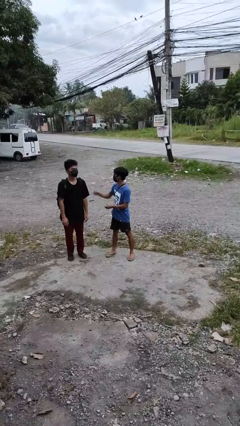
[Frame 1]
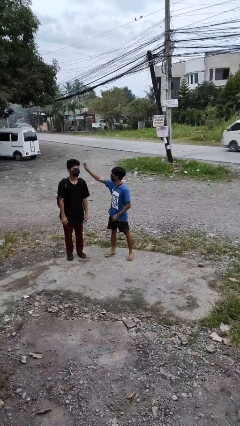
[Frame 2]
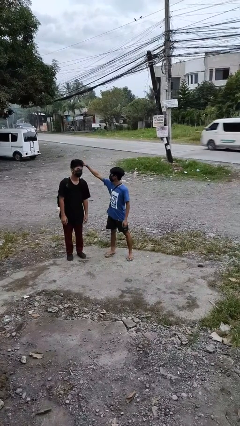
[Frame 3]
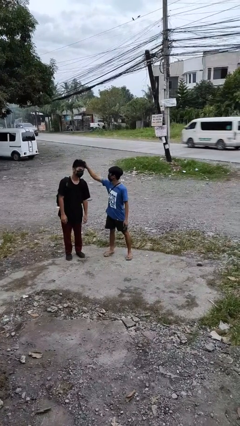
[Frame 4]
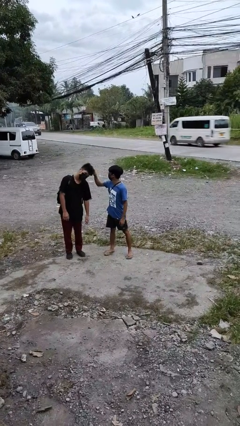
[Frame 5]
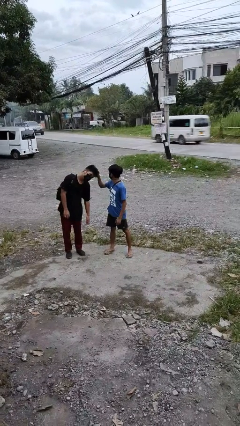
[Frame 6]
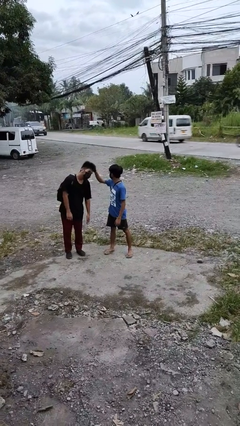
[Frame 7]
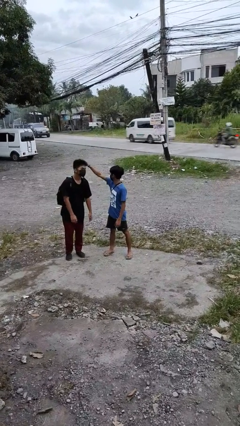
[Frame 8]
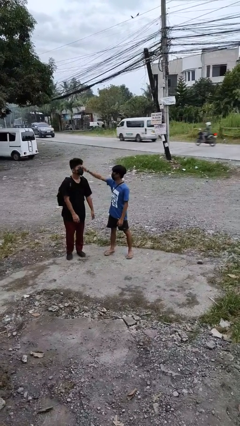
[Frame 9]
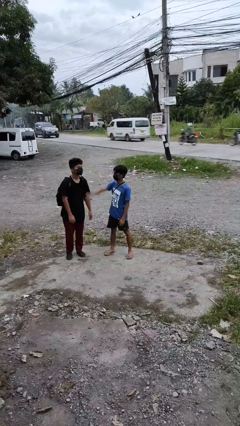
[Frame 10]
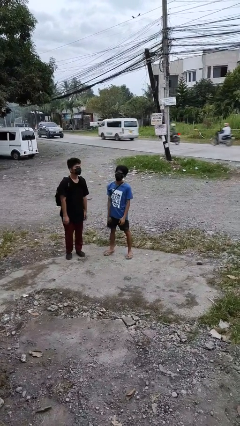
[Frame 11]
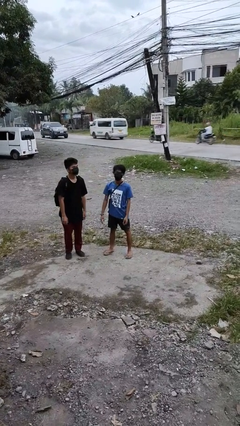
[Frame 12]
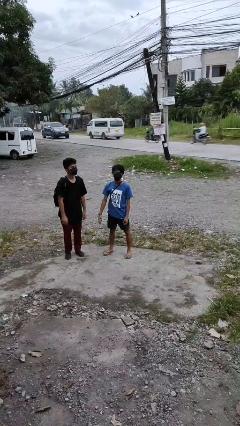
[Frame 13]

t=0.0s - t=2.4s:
person grabs person by hair

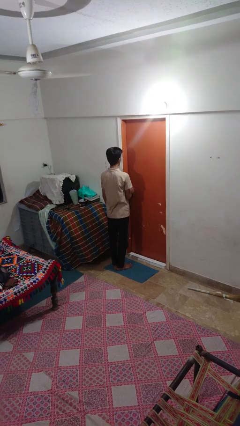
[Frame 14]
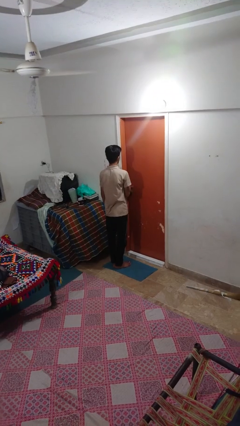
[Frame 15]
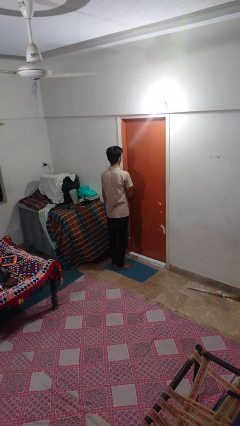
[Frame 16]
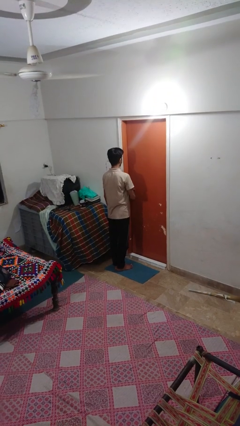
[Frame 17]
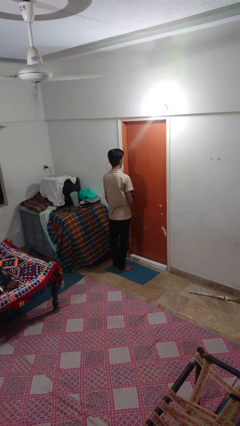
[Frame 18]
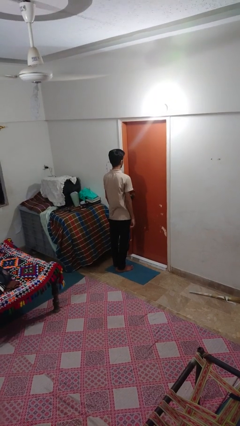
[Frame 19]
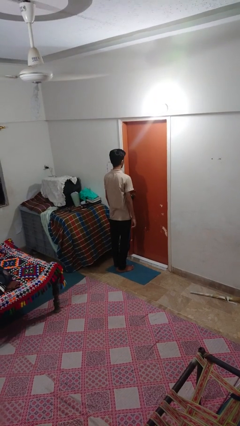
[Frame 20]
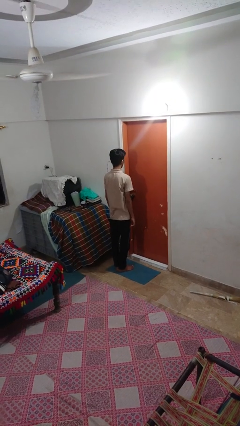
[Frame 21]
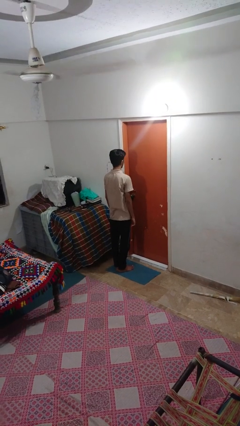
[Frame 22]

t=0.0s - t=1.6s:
person locks door with keys

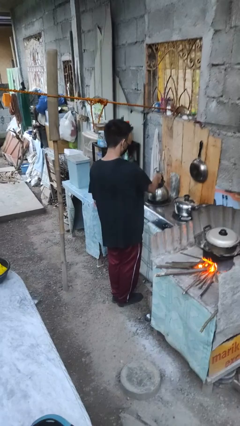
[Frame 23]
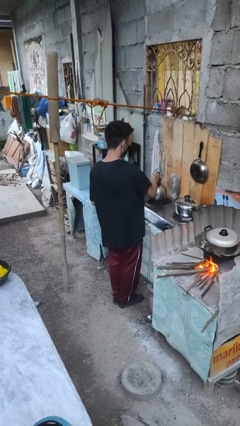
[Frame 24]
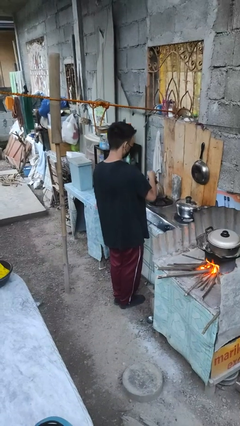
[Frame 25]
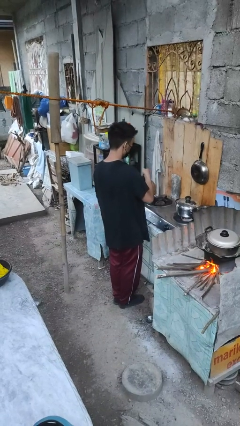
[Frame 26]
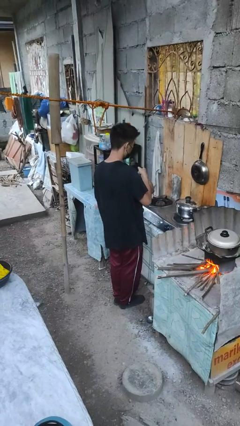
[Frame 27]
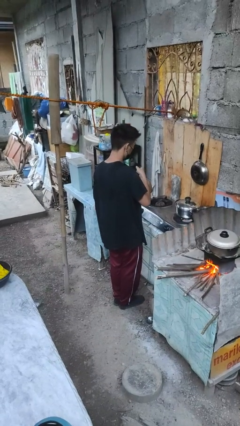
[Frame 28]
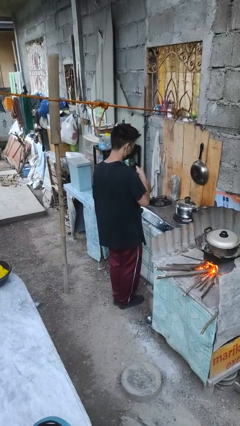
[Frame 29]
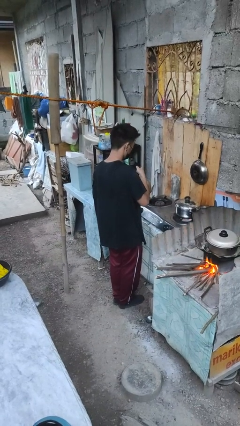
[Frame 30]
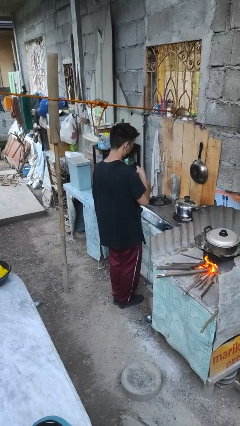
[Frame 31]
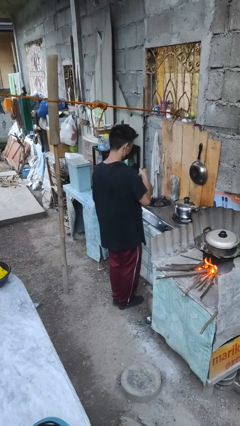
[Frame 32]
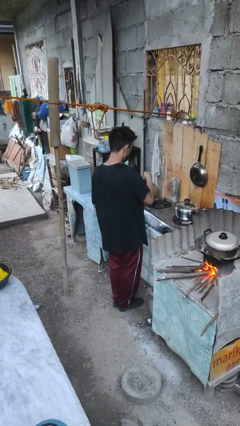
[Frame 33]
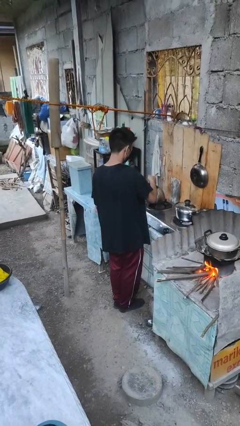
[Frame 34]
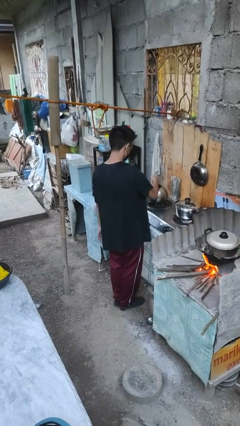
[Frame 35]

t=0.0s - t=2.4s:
person picks up object from countertop

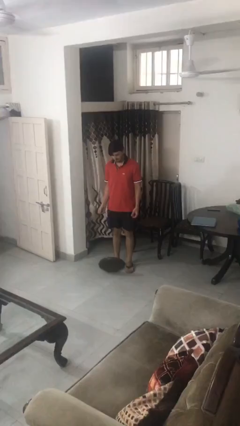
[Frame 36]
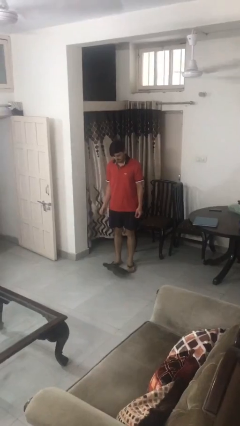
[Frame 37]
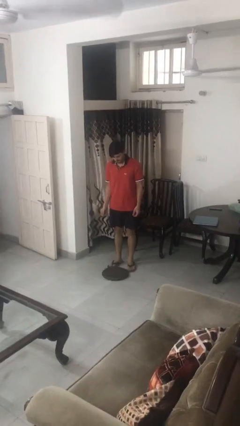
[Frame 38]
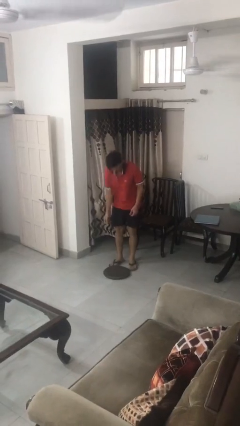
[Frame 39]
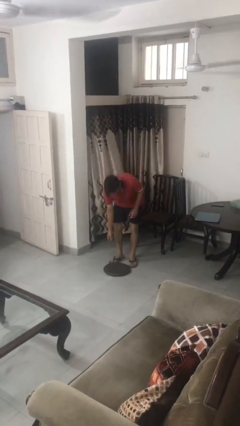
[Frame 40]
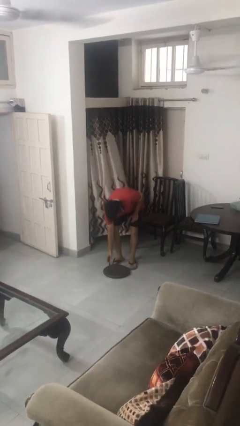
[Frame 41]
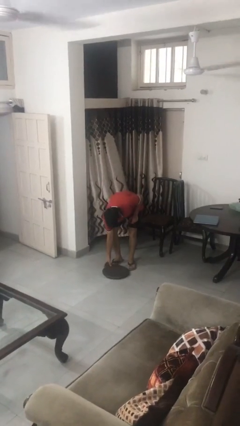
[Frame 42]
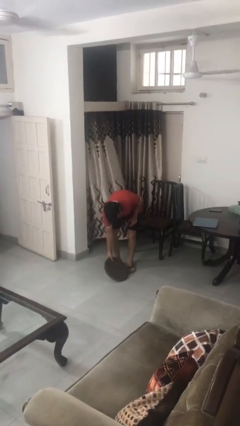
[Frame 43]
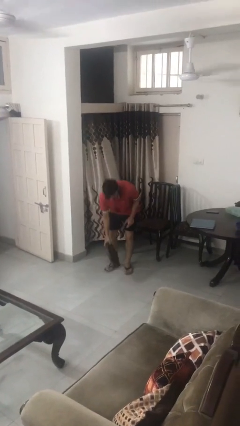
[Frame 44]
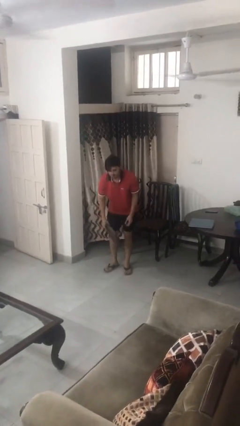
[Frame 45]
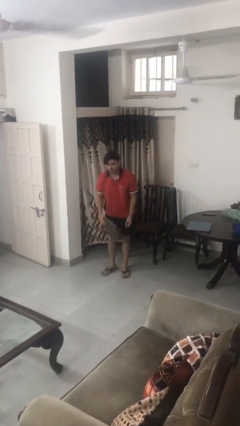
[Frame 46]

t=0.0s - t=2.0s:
person picks up object from floor

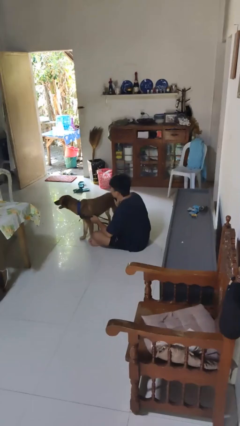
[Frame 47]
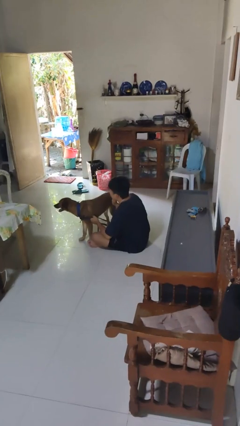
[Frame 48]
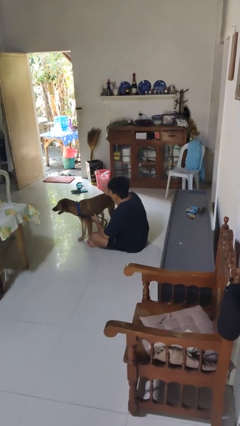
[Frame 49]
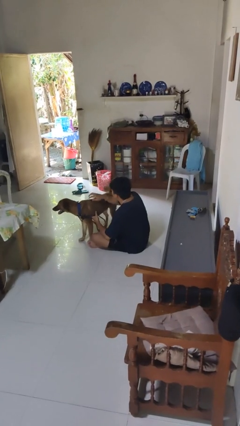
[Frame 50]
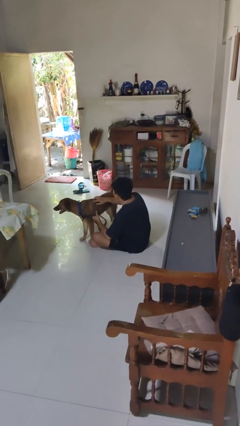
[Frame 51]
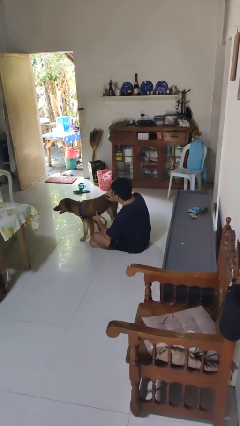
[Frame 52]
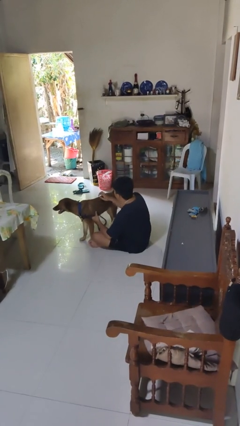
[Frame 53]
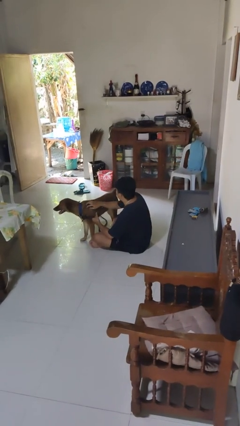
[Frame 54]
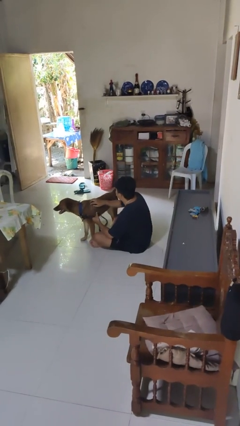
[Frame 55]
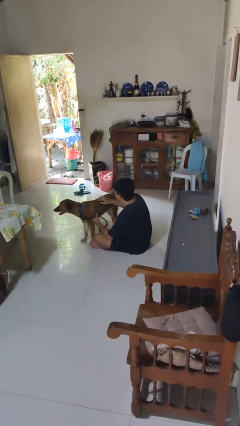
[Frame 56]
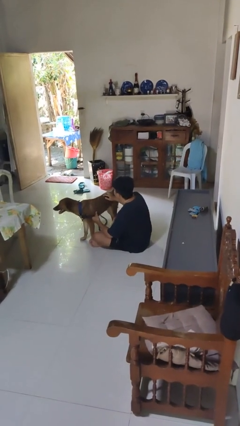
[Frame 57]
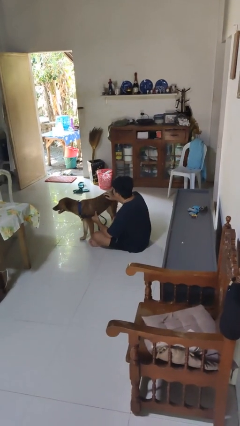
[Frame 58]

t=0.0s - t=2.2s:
person pets dog

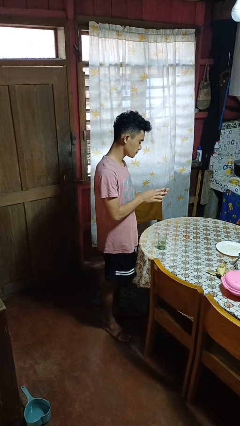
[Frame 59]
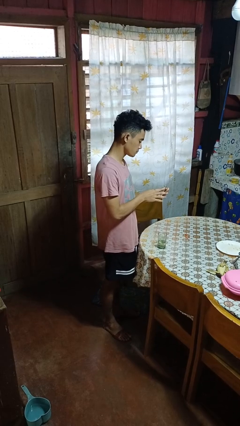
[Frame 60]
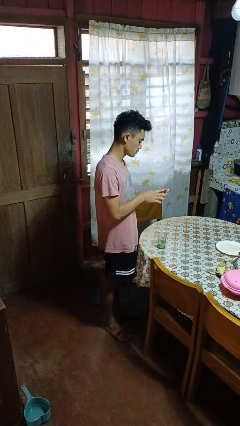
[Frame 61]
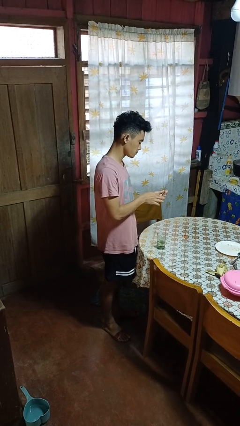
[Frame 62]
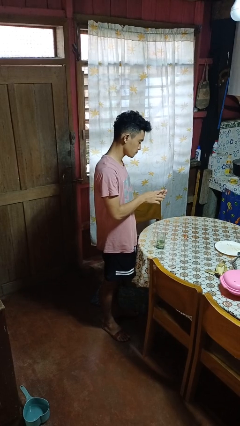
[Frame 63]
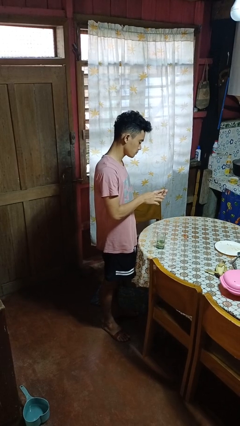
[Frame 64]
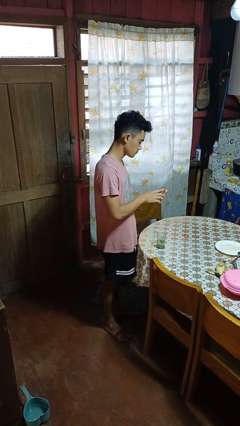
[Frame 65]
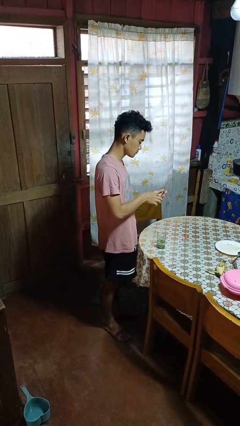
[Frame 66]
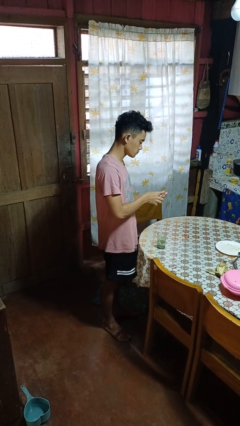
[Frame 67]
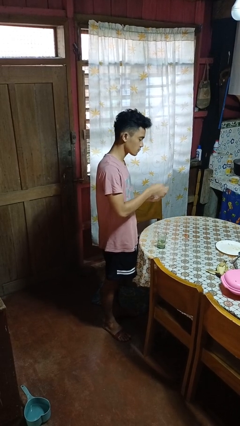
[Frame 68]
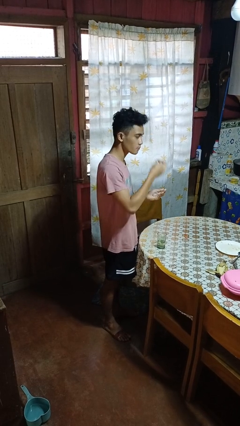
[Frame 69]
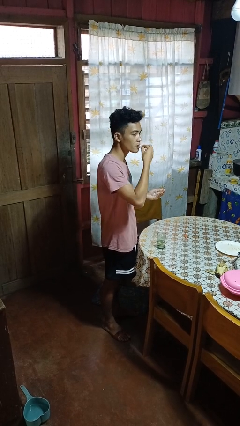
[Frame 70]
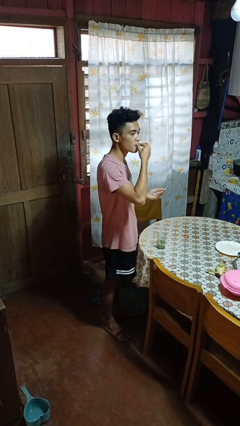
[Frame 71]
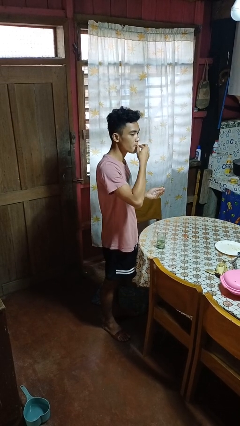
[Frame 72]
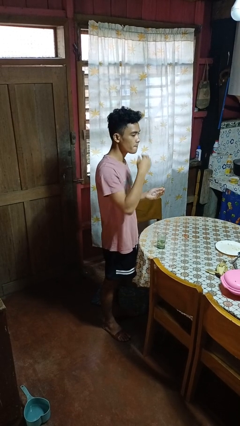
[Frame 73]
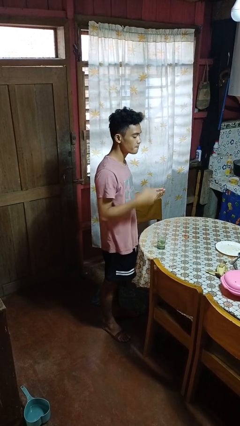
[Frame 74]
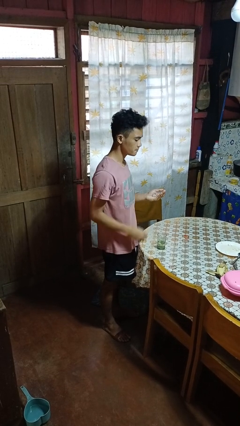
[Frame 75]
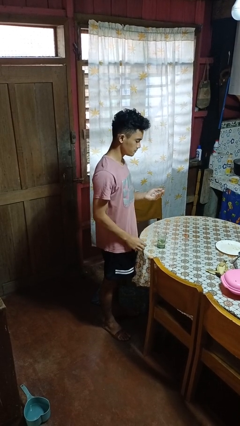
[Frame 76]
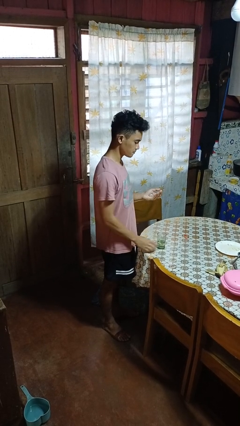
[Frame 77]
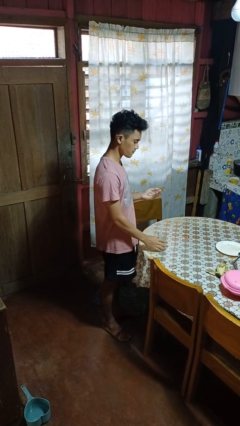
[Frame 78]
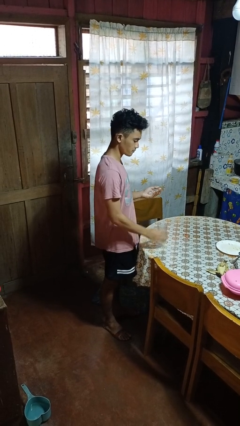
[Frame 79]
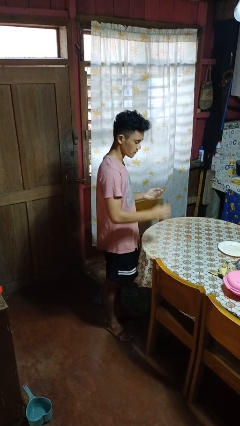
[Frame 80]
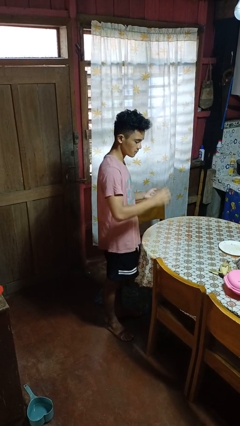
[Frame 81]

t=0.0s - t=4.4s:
person takes medicine pills

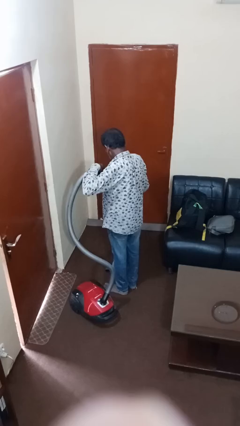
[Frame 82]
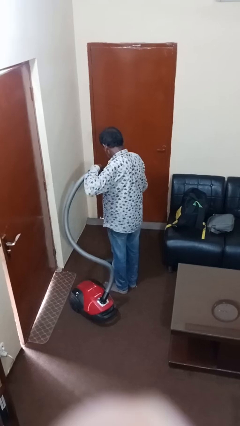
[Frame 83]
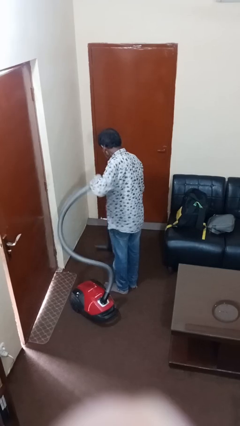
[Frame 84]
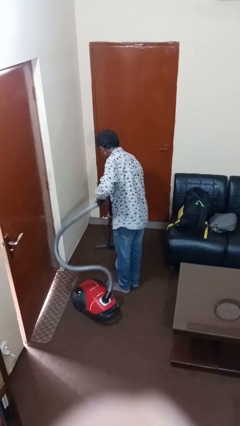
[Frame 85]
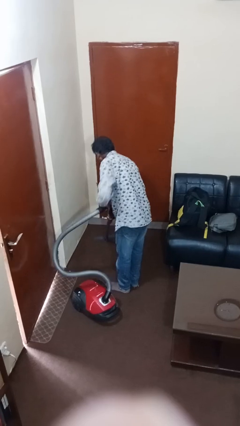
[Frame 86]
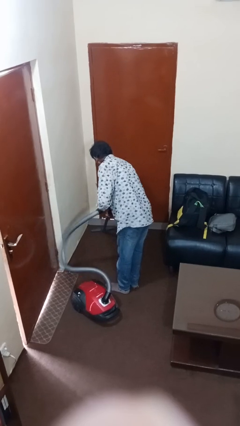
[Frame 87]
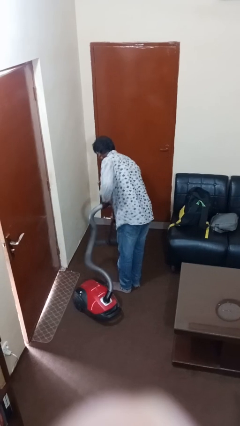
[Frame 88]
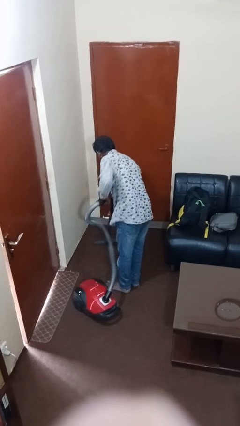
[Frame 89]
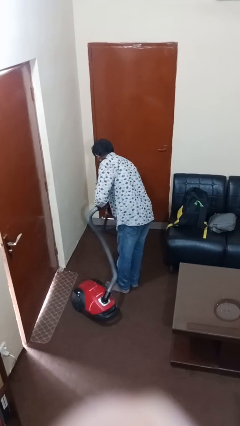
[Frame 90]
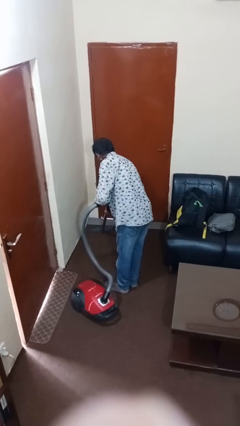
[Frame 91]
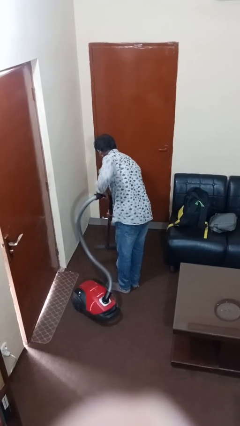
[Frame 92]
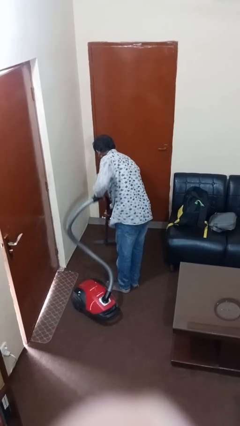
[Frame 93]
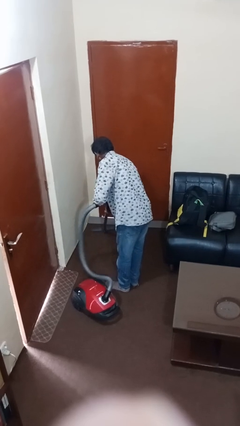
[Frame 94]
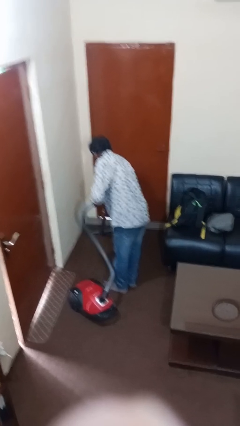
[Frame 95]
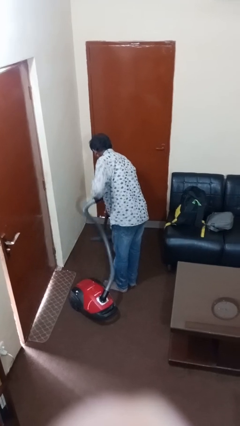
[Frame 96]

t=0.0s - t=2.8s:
person vacuums carpet
